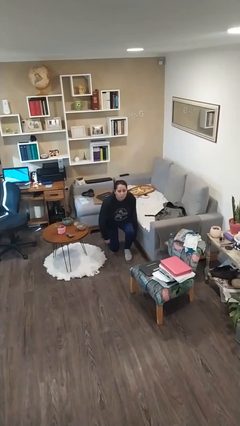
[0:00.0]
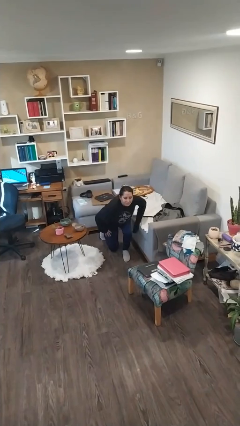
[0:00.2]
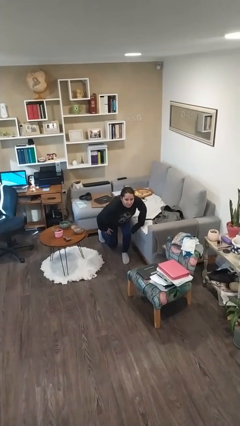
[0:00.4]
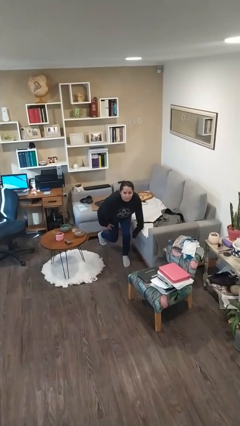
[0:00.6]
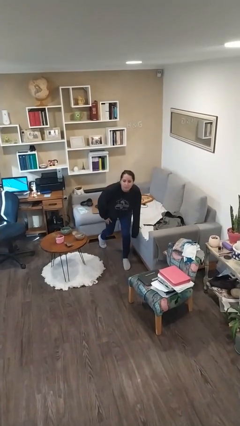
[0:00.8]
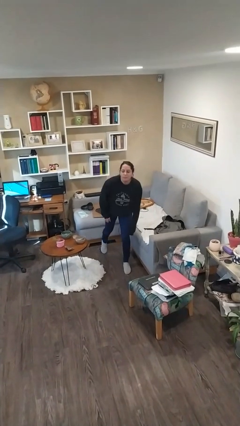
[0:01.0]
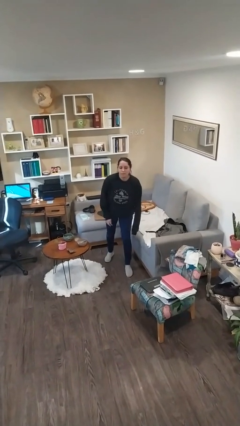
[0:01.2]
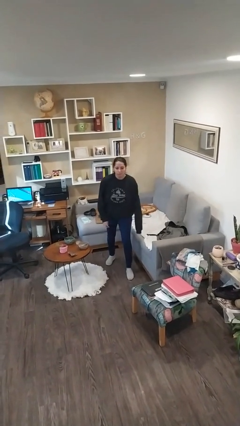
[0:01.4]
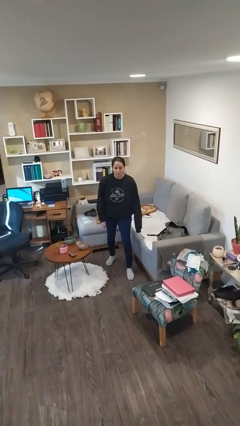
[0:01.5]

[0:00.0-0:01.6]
person stands up from floor

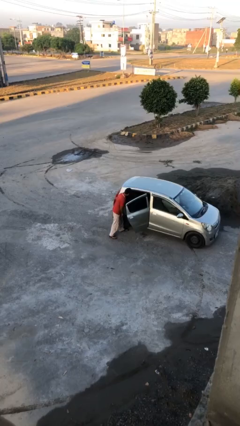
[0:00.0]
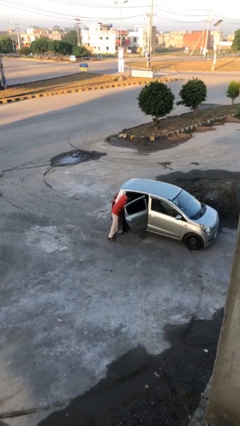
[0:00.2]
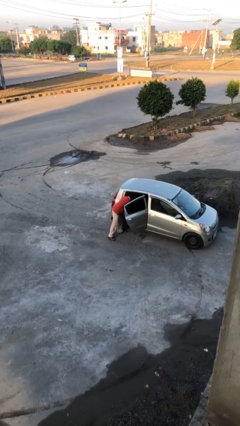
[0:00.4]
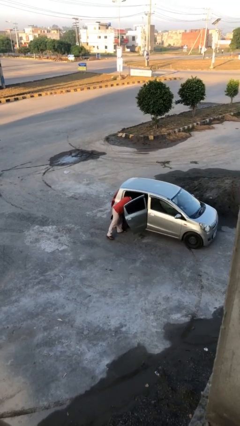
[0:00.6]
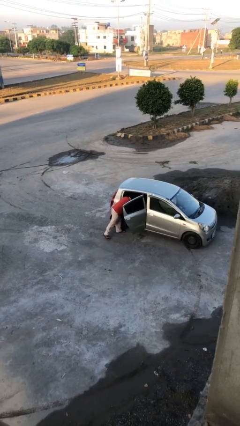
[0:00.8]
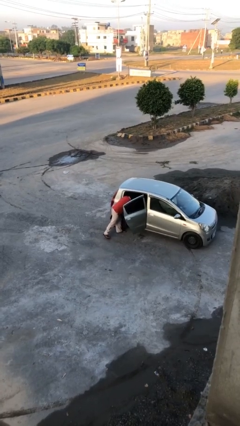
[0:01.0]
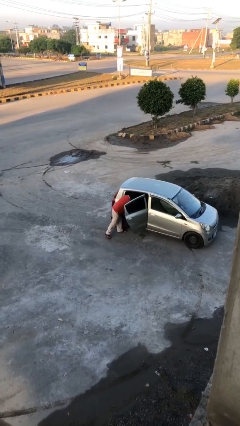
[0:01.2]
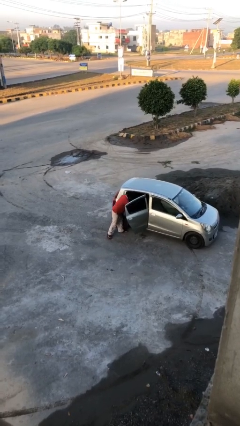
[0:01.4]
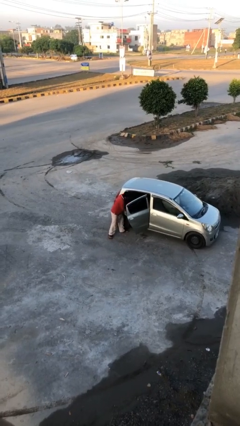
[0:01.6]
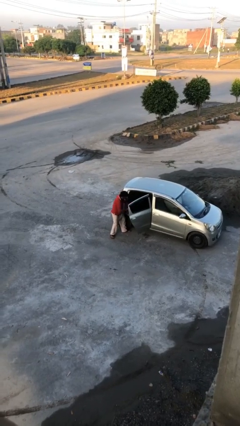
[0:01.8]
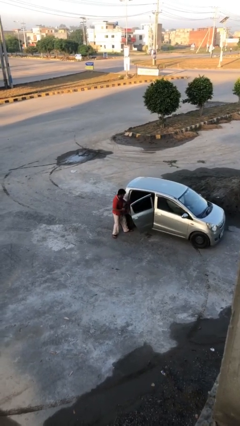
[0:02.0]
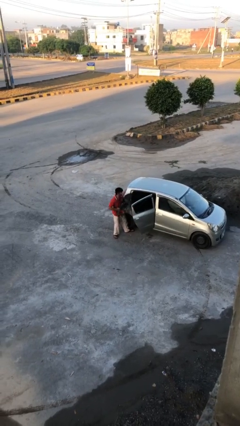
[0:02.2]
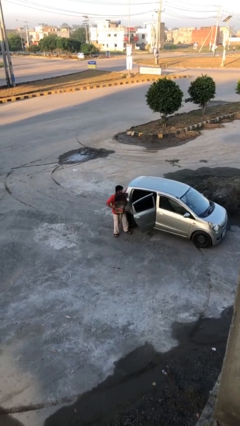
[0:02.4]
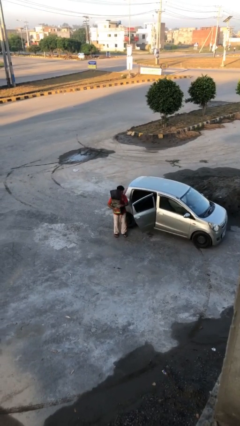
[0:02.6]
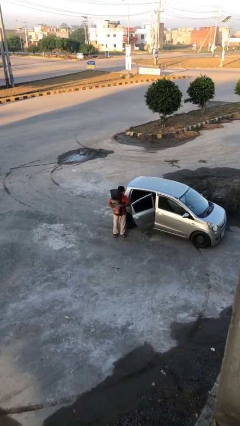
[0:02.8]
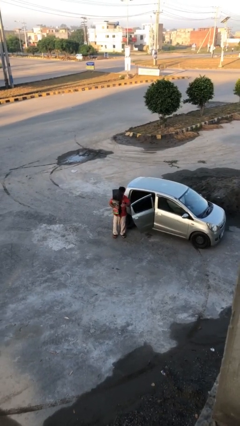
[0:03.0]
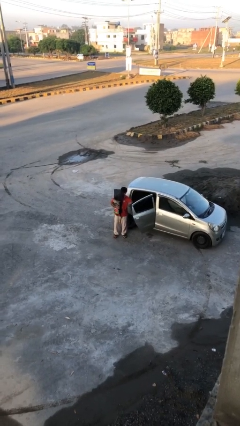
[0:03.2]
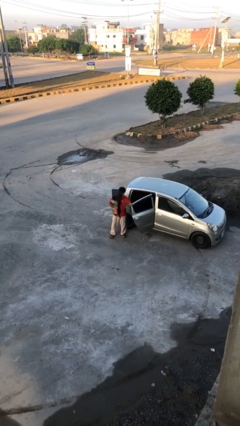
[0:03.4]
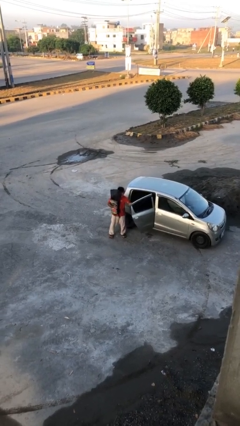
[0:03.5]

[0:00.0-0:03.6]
person unloads car

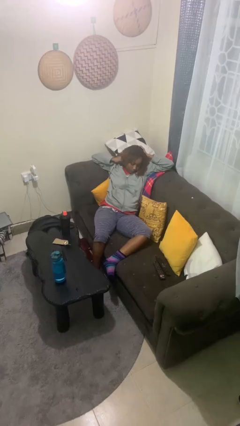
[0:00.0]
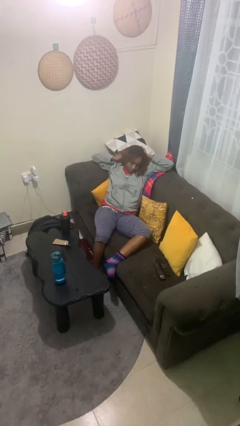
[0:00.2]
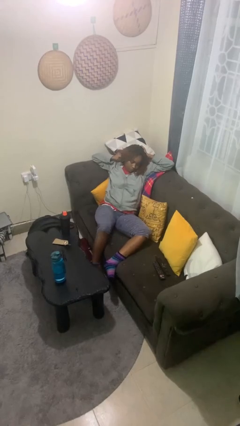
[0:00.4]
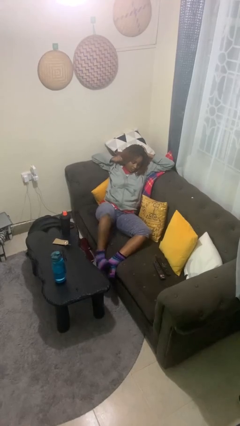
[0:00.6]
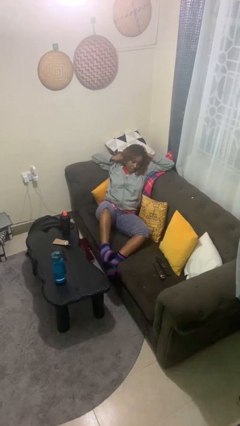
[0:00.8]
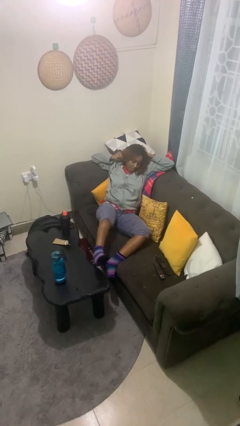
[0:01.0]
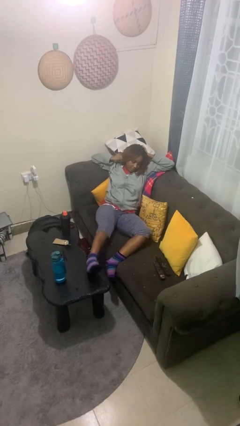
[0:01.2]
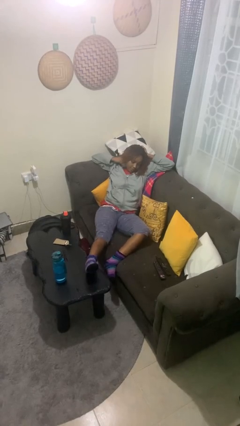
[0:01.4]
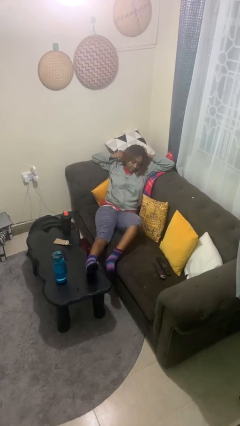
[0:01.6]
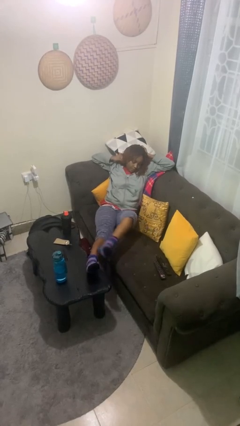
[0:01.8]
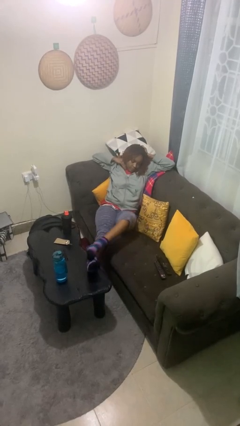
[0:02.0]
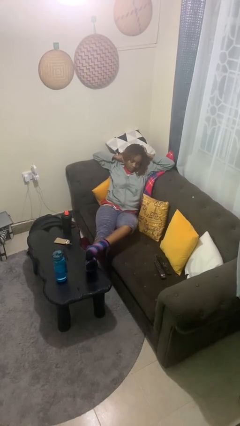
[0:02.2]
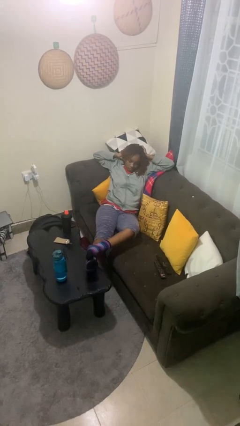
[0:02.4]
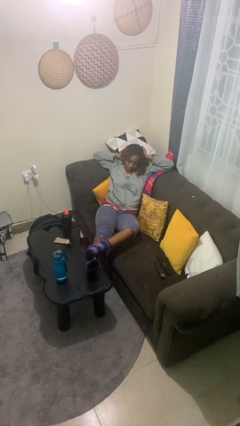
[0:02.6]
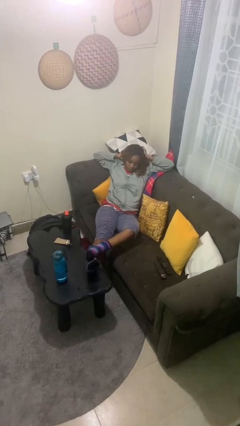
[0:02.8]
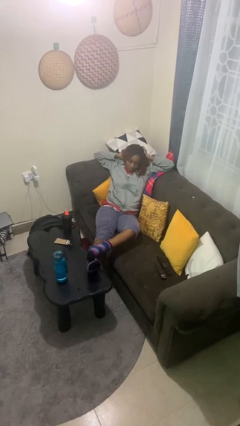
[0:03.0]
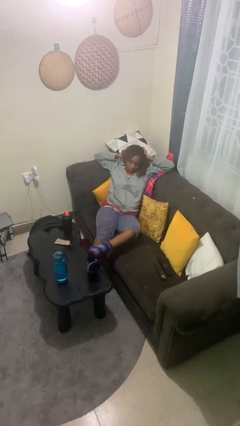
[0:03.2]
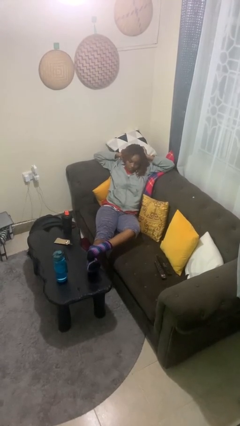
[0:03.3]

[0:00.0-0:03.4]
person puts feet up

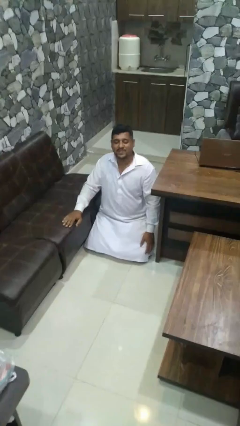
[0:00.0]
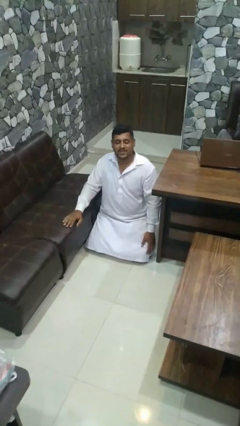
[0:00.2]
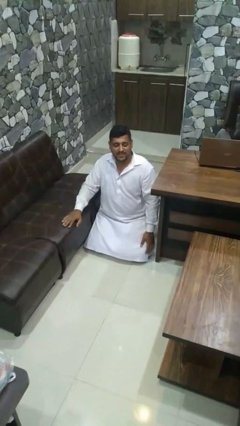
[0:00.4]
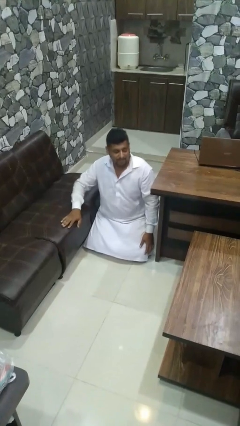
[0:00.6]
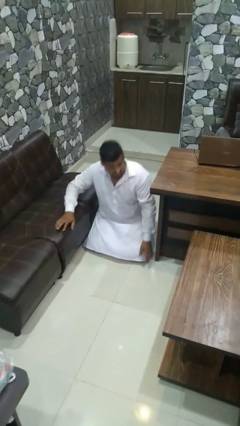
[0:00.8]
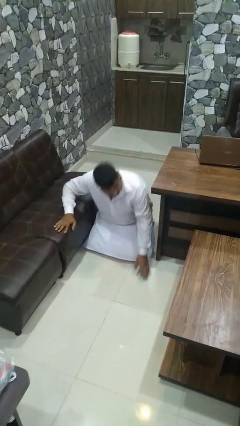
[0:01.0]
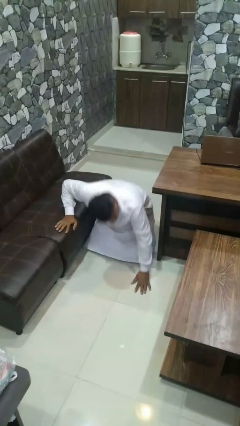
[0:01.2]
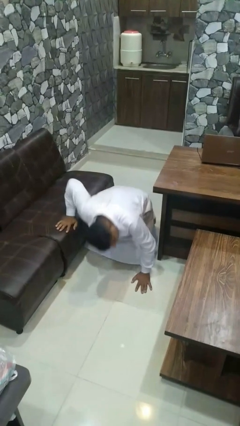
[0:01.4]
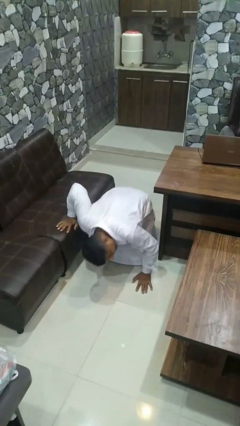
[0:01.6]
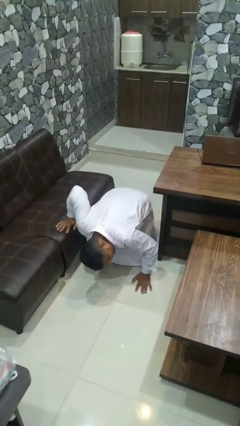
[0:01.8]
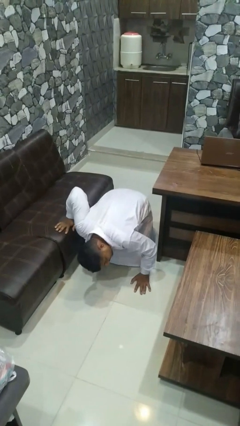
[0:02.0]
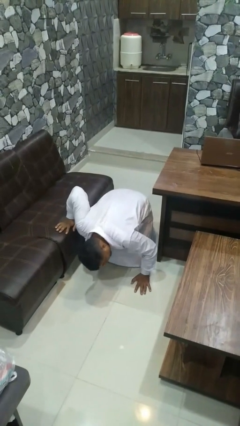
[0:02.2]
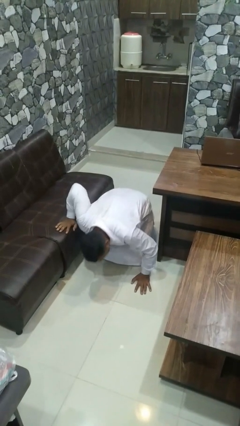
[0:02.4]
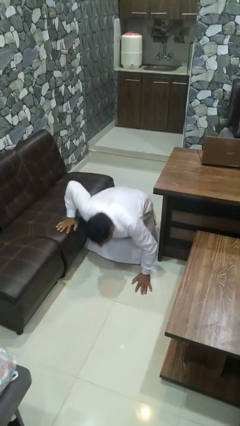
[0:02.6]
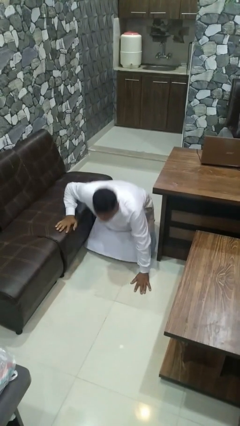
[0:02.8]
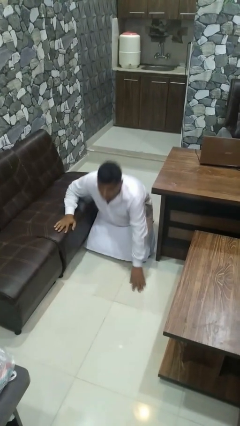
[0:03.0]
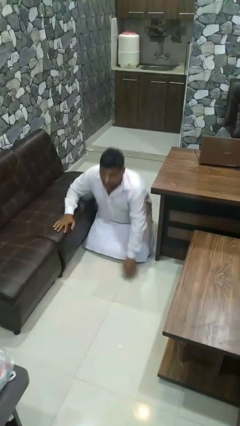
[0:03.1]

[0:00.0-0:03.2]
person searches under couch

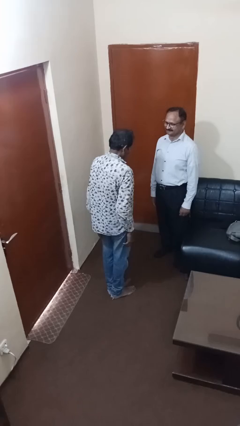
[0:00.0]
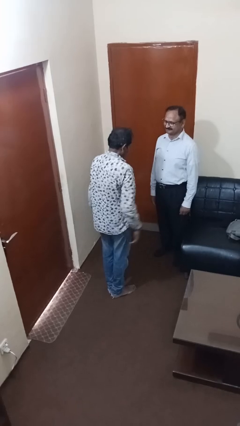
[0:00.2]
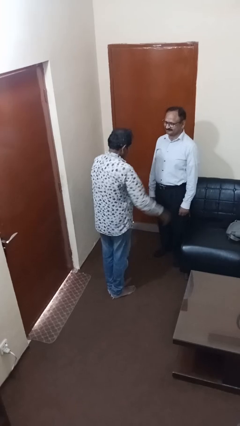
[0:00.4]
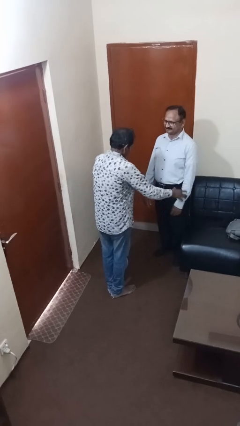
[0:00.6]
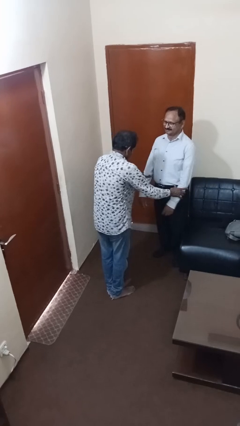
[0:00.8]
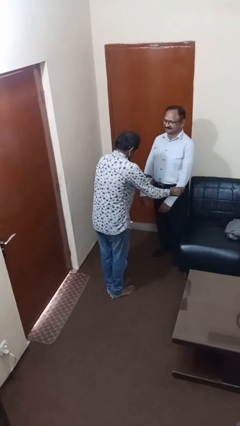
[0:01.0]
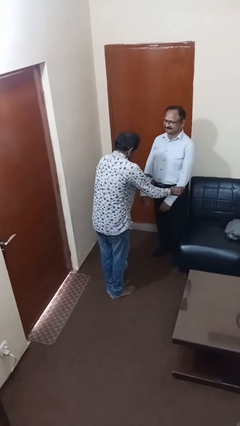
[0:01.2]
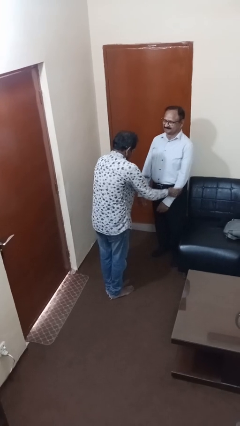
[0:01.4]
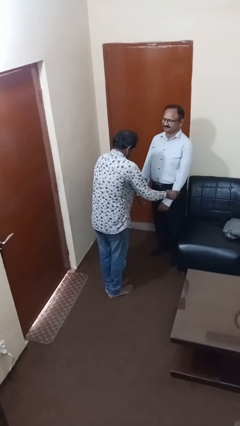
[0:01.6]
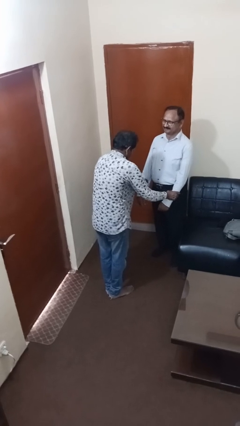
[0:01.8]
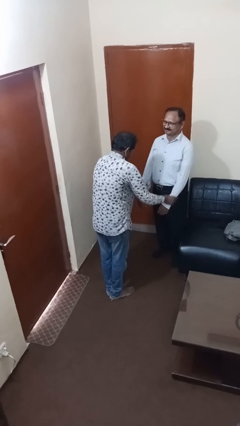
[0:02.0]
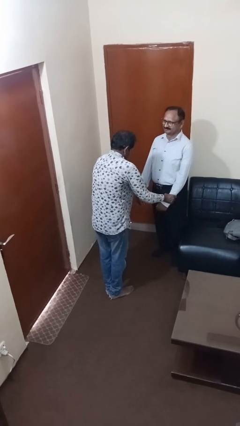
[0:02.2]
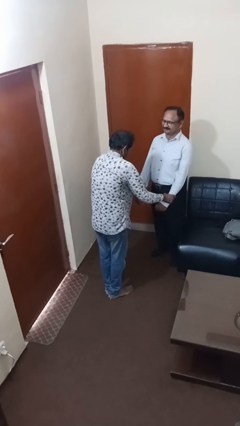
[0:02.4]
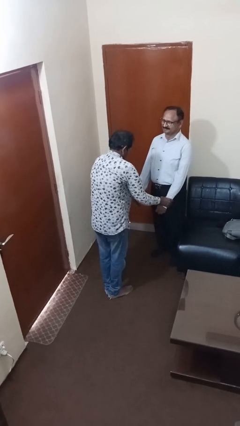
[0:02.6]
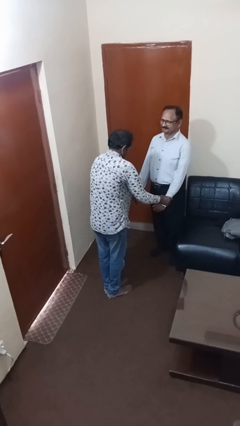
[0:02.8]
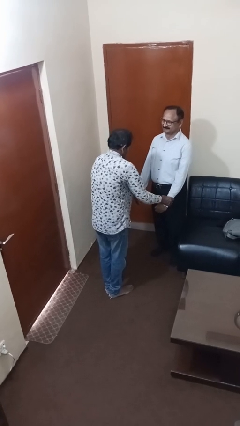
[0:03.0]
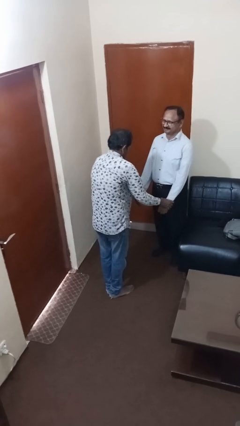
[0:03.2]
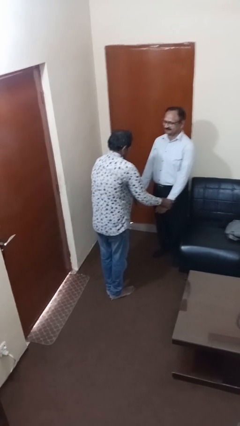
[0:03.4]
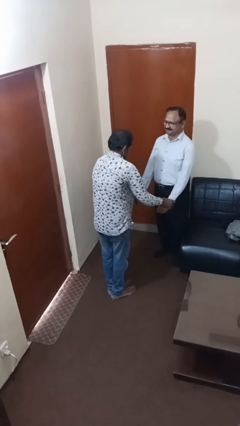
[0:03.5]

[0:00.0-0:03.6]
person grabs person by forearm

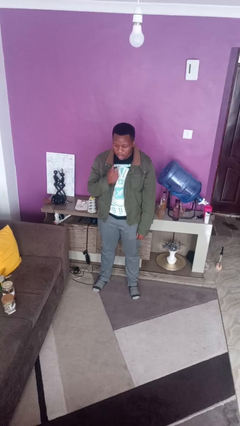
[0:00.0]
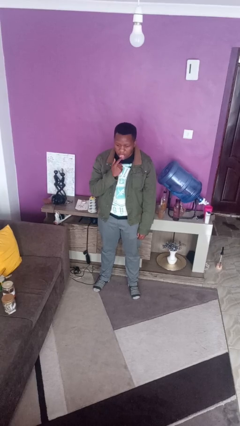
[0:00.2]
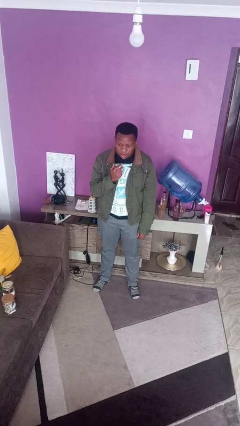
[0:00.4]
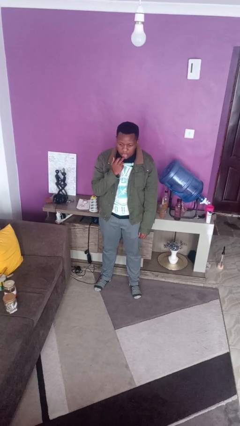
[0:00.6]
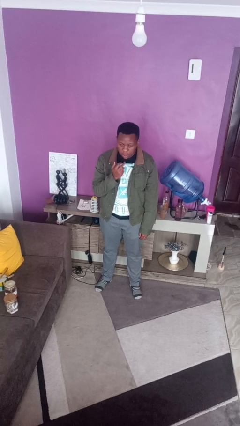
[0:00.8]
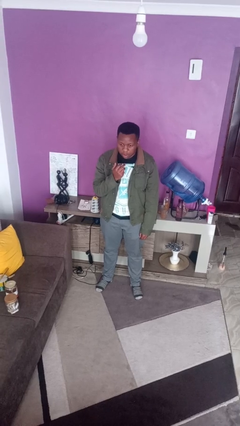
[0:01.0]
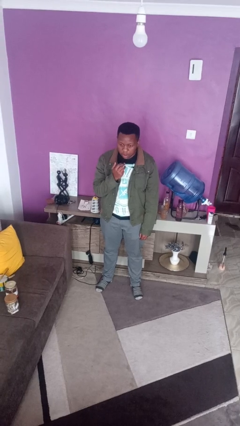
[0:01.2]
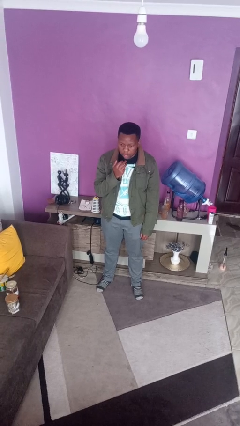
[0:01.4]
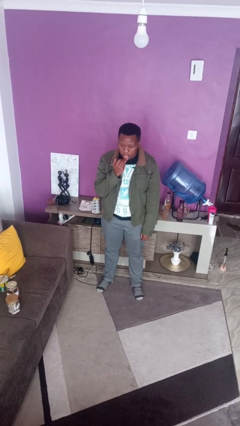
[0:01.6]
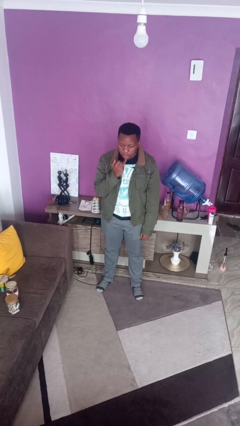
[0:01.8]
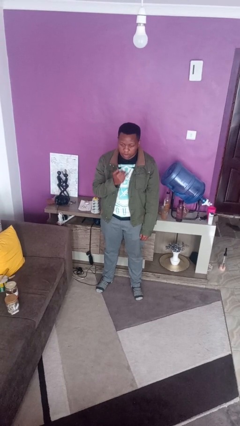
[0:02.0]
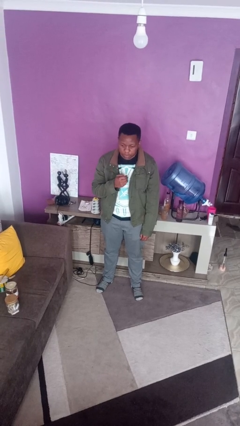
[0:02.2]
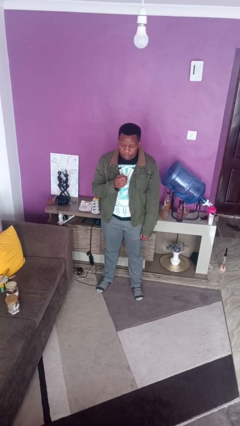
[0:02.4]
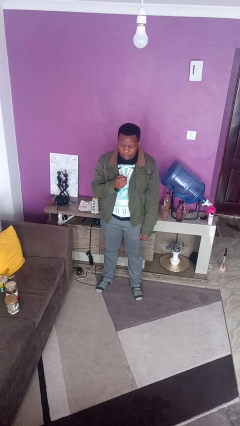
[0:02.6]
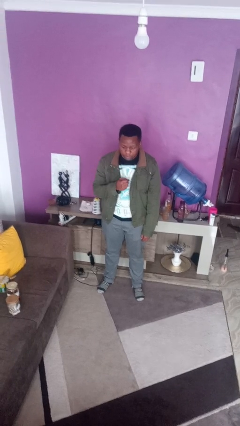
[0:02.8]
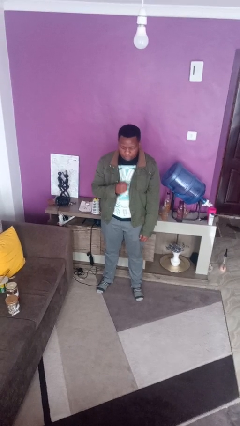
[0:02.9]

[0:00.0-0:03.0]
person licks fingers
